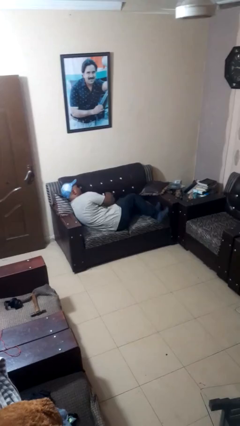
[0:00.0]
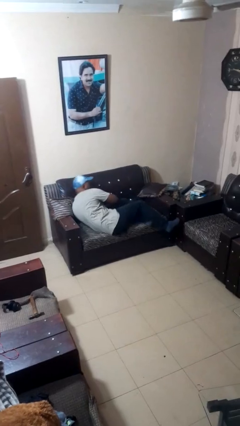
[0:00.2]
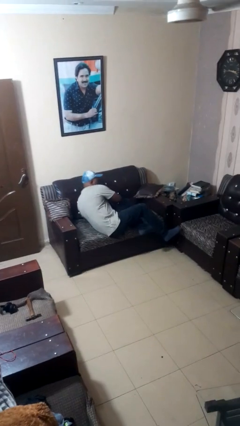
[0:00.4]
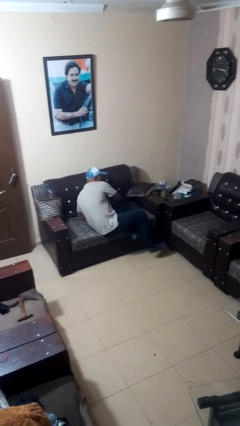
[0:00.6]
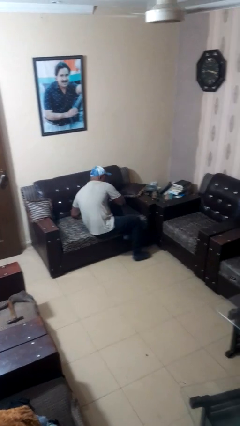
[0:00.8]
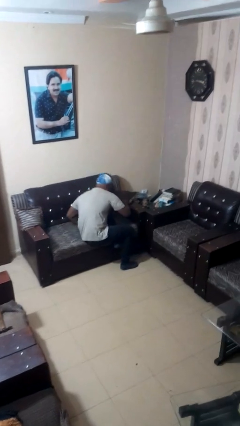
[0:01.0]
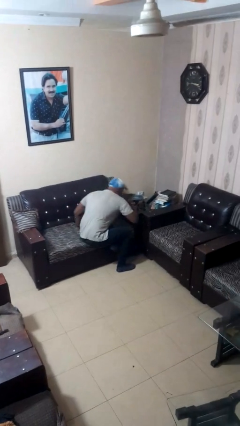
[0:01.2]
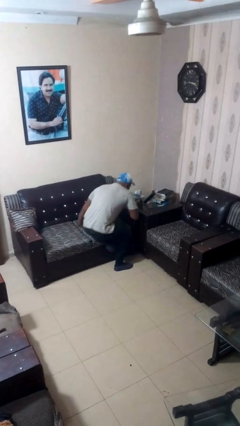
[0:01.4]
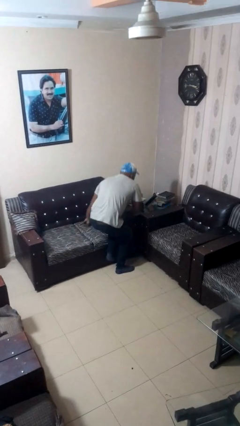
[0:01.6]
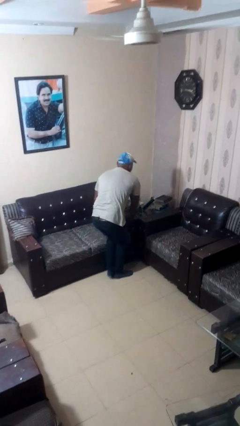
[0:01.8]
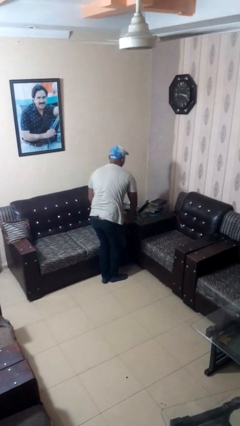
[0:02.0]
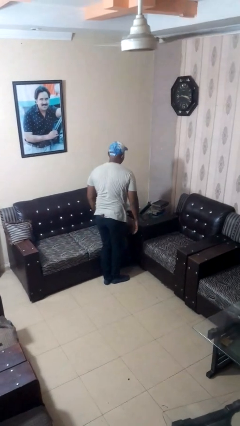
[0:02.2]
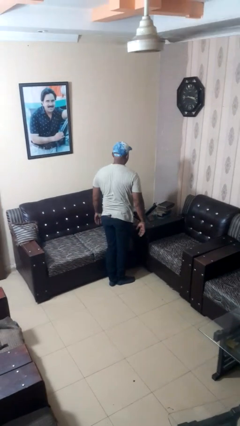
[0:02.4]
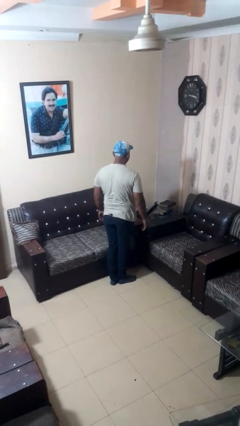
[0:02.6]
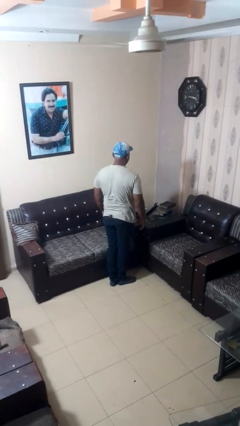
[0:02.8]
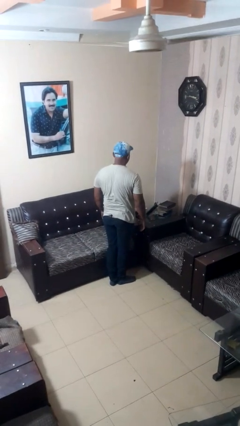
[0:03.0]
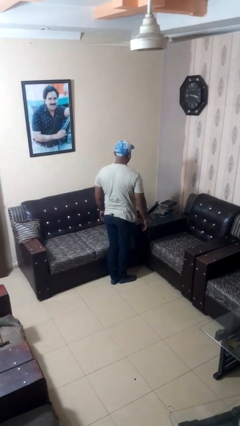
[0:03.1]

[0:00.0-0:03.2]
person stands up

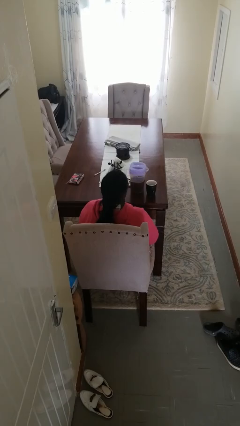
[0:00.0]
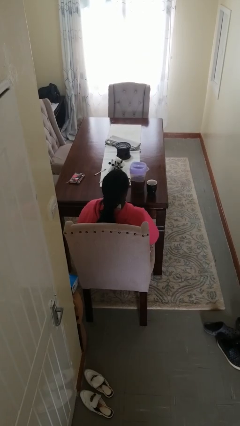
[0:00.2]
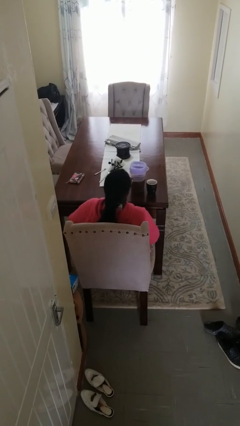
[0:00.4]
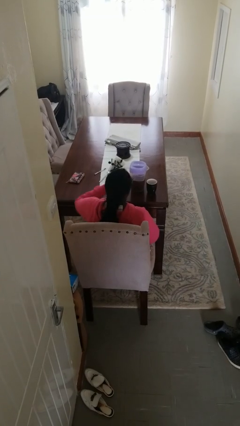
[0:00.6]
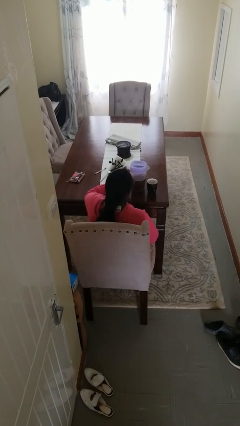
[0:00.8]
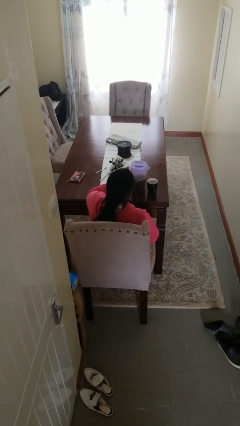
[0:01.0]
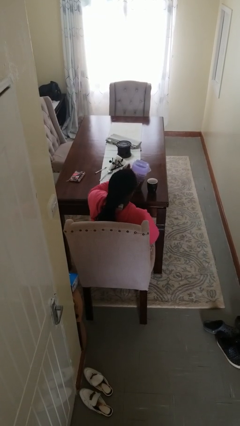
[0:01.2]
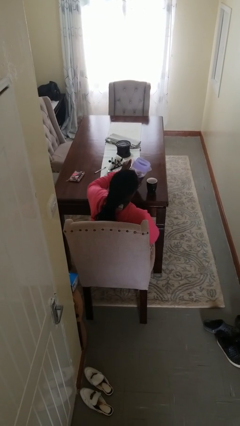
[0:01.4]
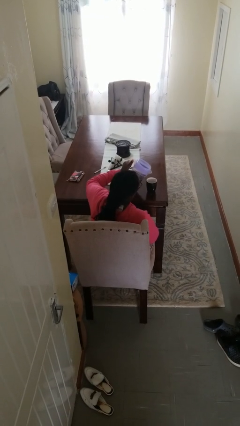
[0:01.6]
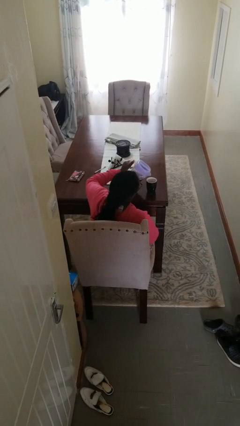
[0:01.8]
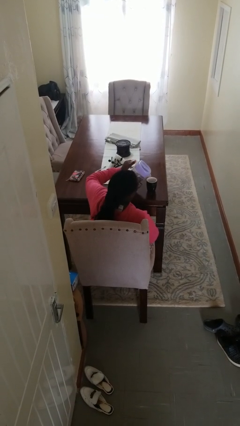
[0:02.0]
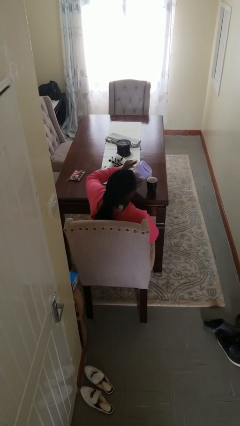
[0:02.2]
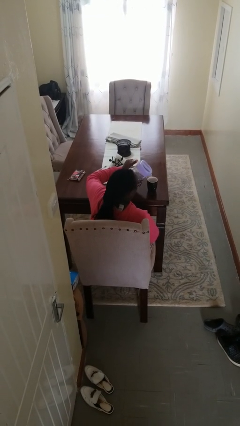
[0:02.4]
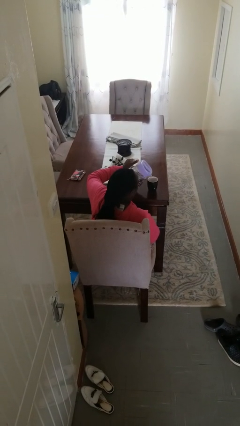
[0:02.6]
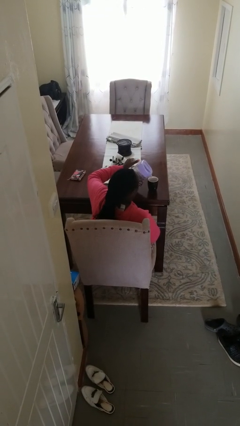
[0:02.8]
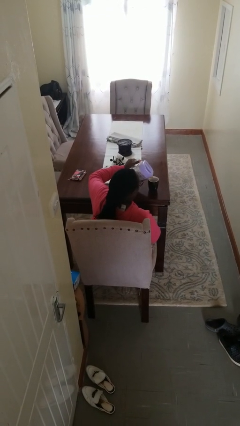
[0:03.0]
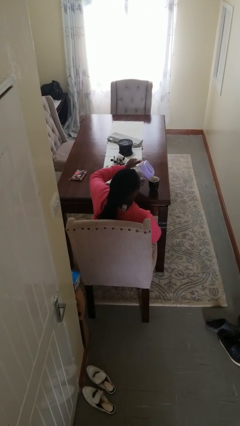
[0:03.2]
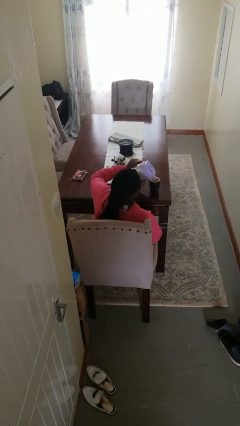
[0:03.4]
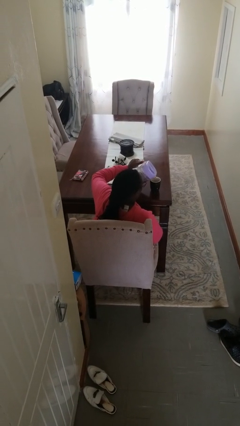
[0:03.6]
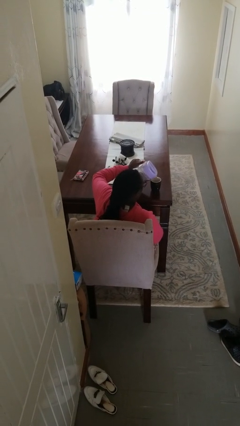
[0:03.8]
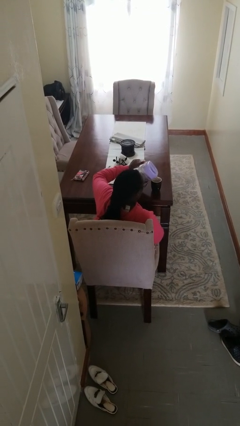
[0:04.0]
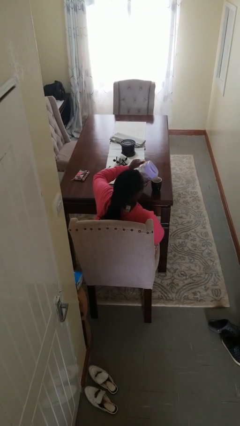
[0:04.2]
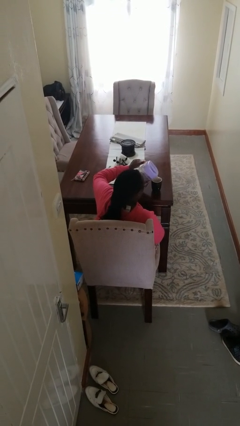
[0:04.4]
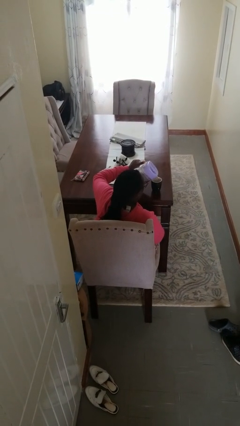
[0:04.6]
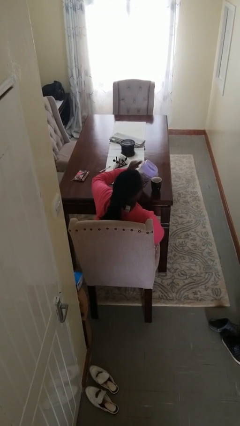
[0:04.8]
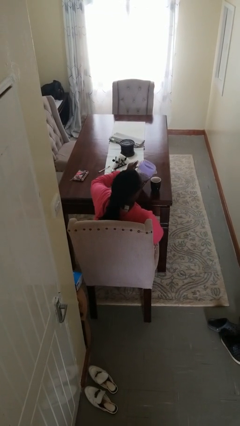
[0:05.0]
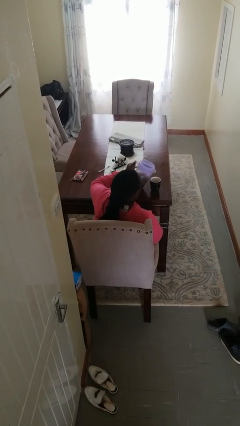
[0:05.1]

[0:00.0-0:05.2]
person pours coffee into mug

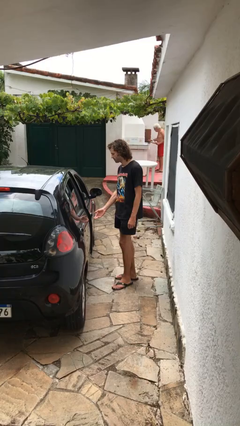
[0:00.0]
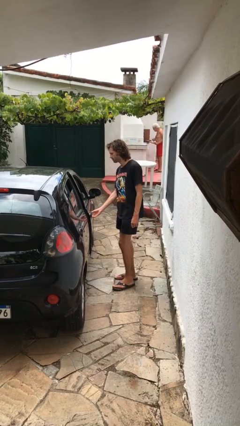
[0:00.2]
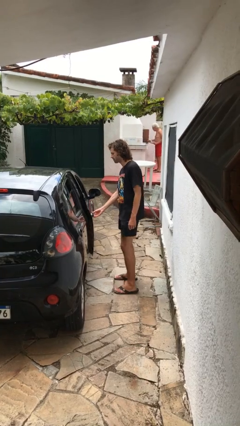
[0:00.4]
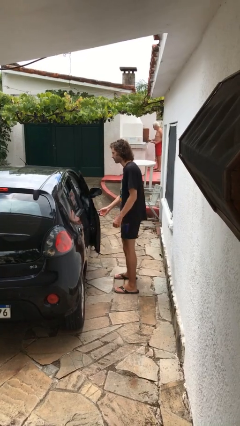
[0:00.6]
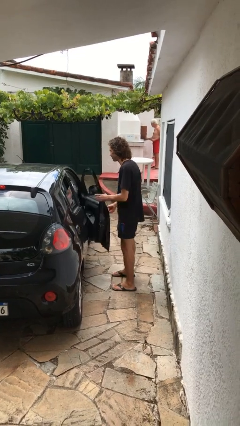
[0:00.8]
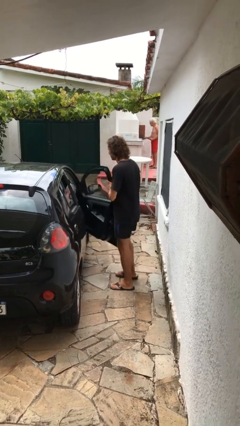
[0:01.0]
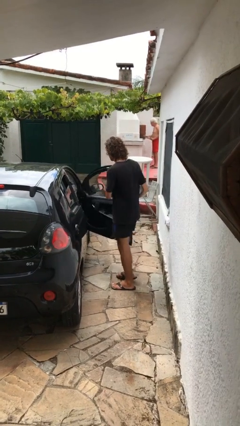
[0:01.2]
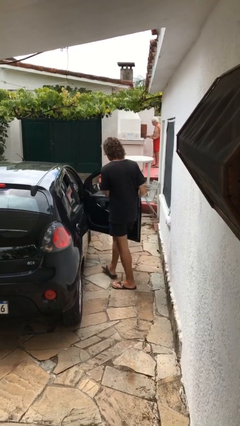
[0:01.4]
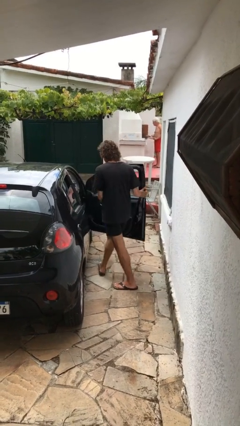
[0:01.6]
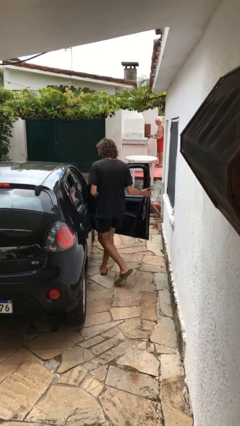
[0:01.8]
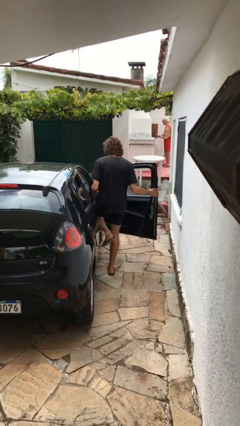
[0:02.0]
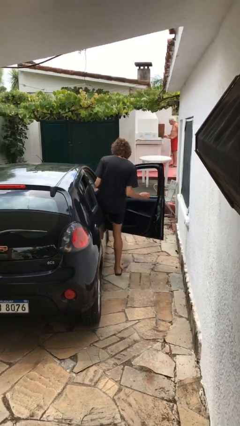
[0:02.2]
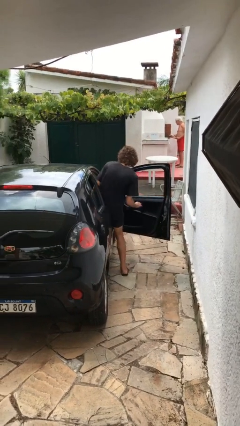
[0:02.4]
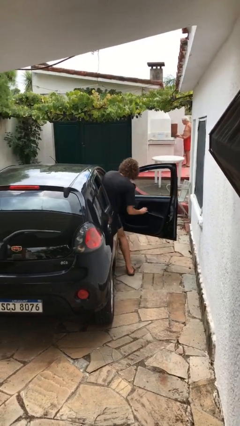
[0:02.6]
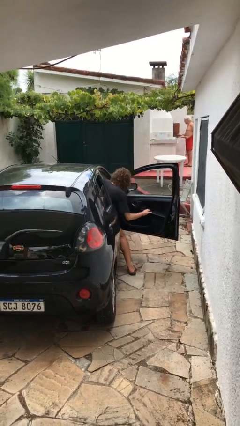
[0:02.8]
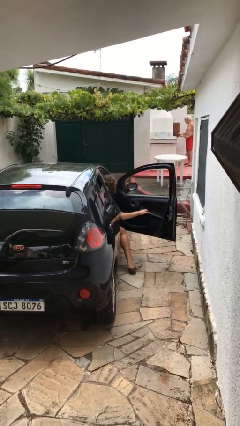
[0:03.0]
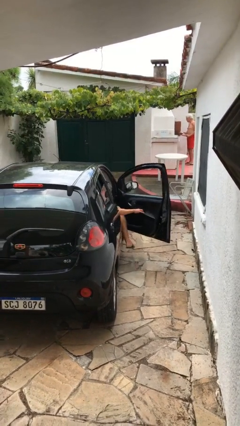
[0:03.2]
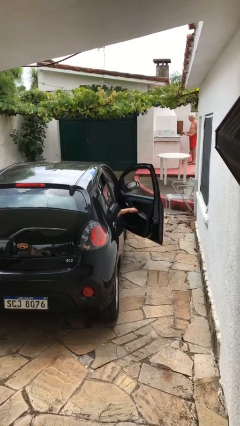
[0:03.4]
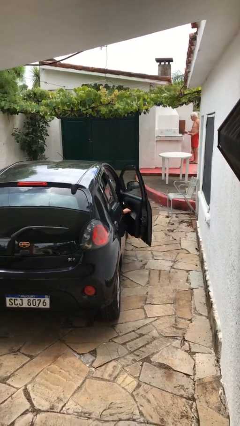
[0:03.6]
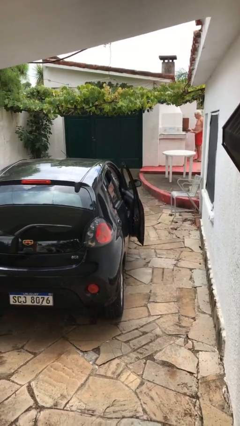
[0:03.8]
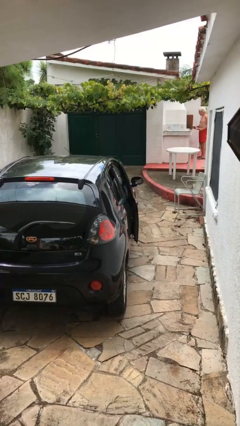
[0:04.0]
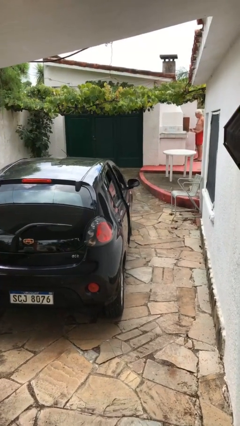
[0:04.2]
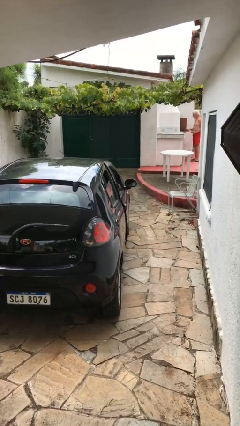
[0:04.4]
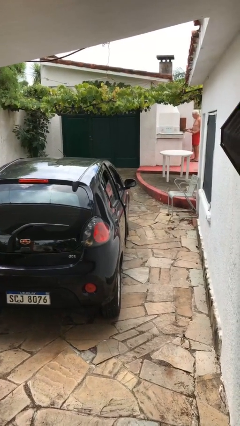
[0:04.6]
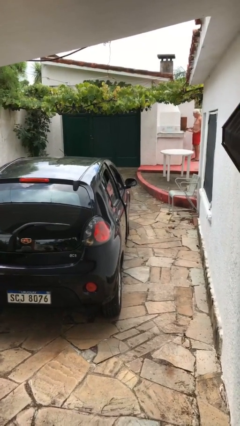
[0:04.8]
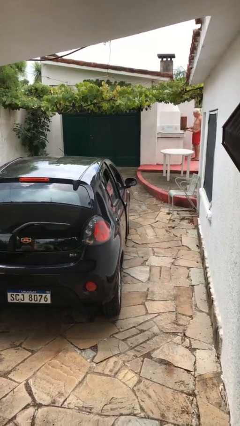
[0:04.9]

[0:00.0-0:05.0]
car picks up person

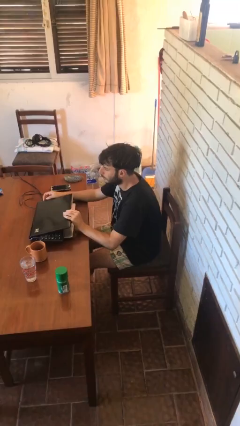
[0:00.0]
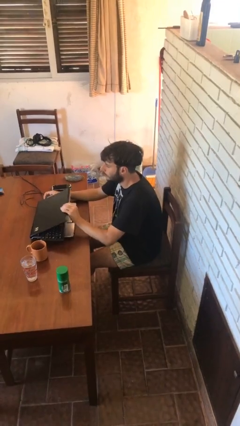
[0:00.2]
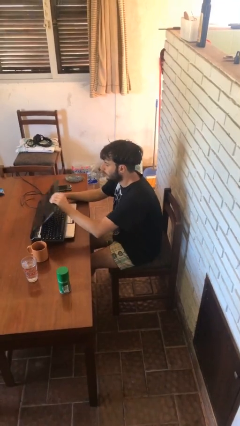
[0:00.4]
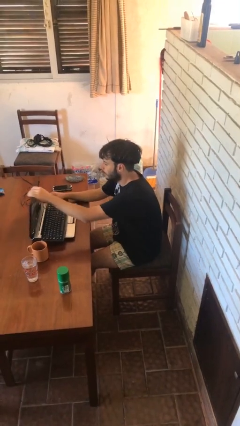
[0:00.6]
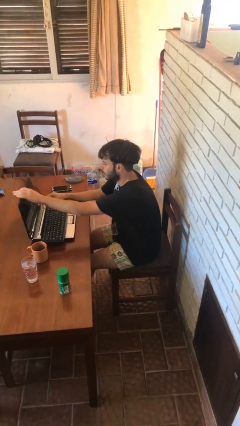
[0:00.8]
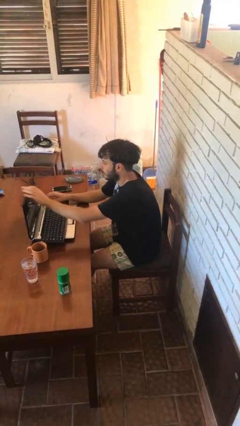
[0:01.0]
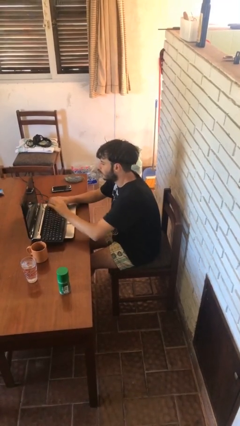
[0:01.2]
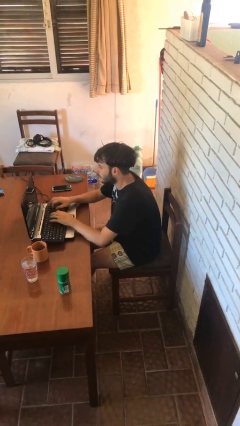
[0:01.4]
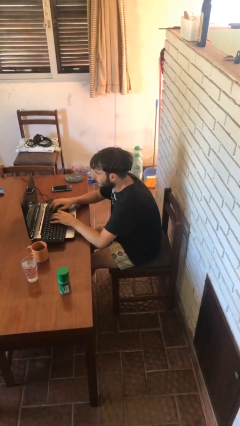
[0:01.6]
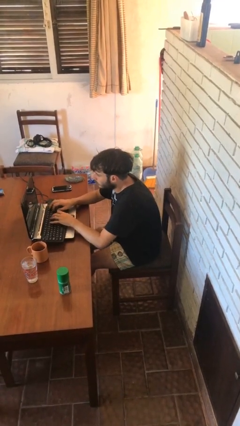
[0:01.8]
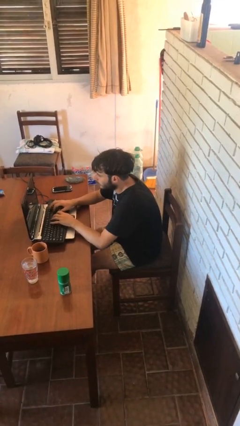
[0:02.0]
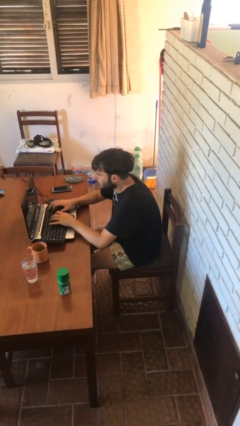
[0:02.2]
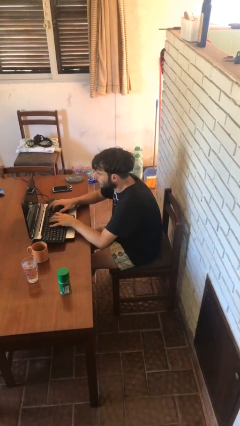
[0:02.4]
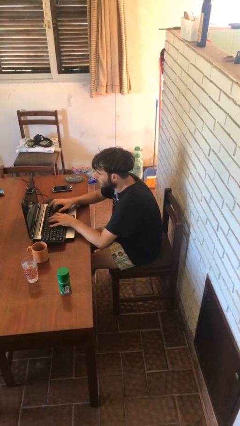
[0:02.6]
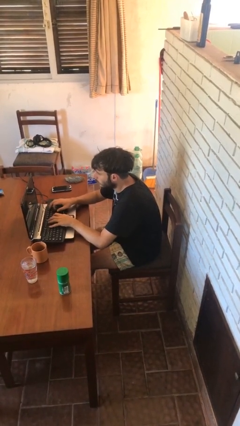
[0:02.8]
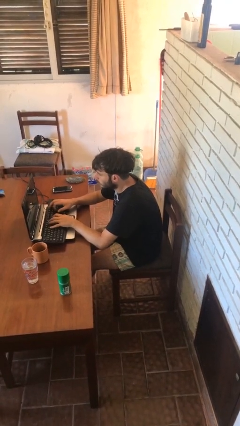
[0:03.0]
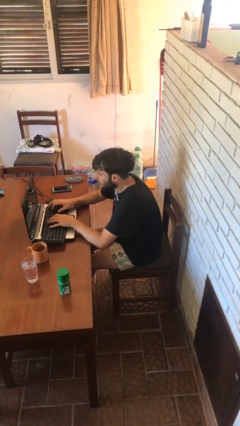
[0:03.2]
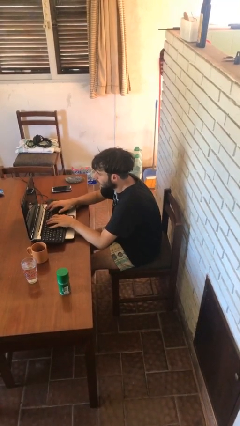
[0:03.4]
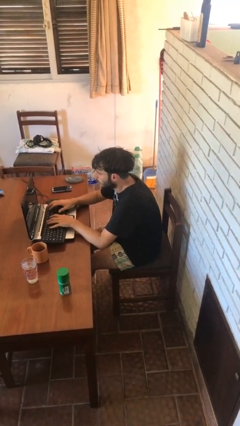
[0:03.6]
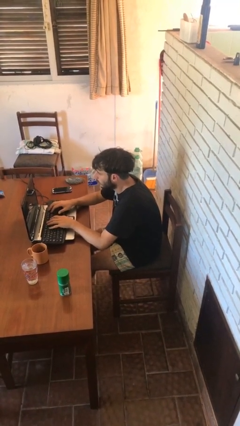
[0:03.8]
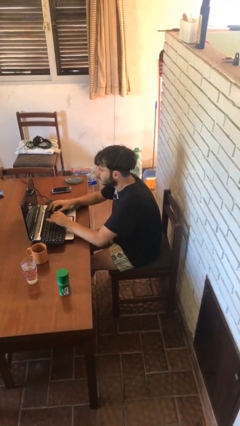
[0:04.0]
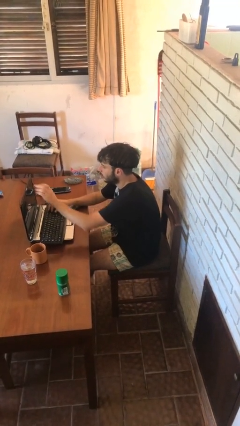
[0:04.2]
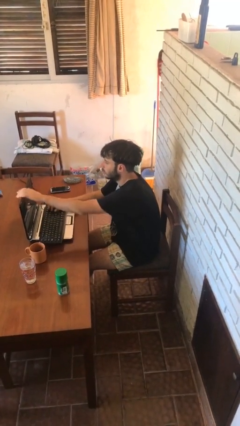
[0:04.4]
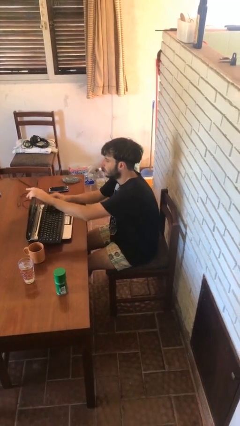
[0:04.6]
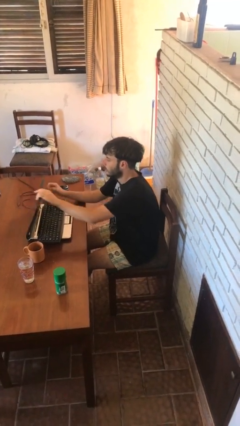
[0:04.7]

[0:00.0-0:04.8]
person interacts with laptop

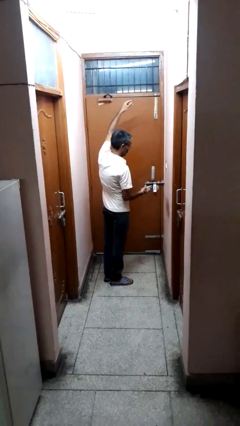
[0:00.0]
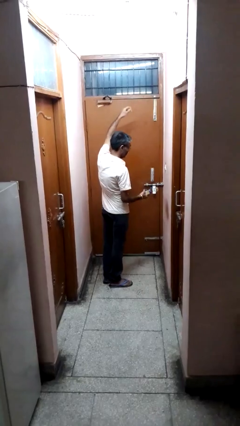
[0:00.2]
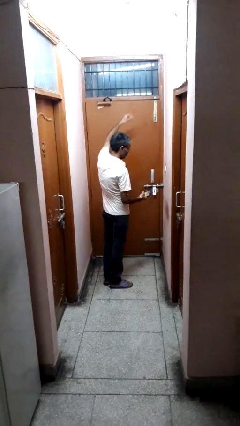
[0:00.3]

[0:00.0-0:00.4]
person catches dropped object
